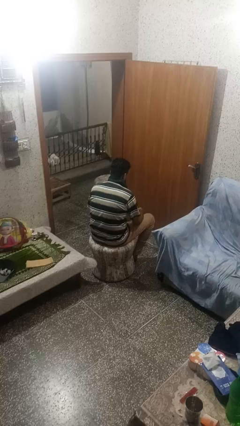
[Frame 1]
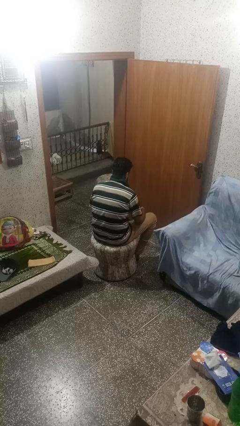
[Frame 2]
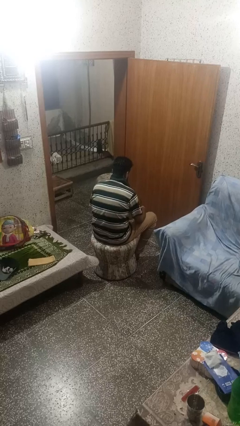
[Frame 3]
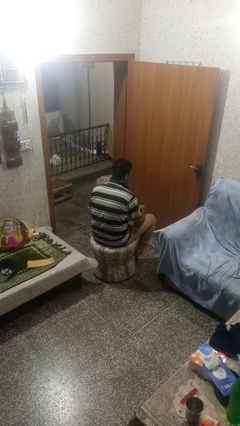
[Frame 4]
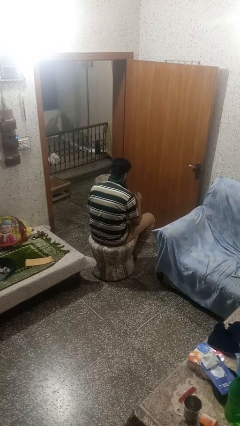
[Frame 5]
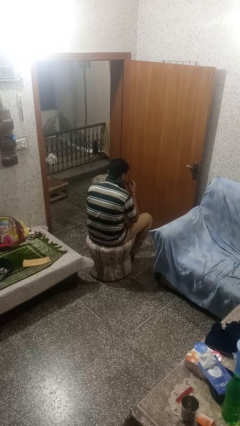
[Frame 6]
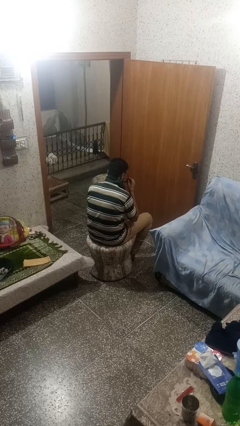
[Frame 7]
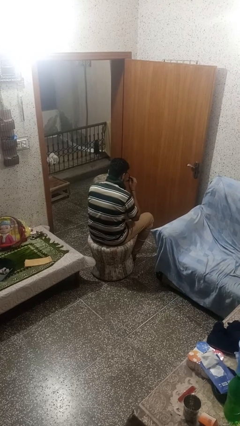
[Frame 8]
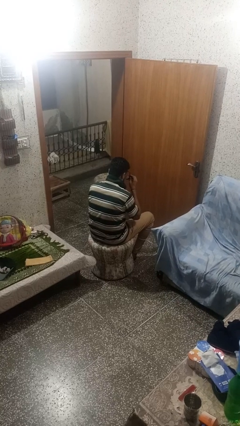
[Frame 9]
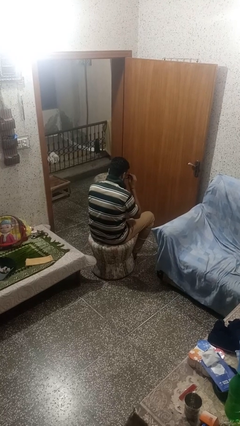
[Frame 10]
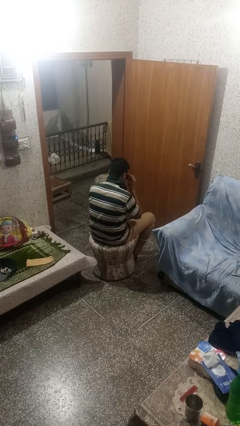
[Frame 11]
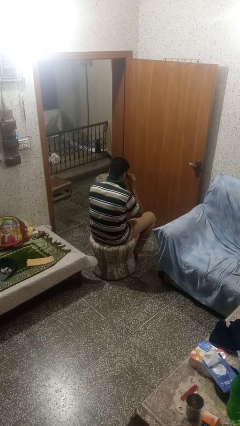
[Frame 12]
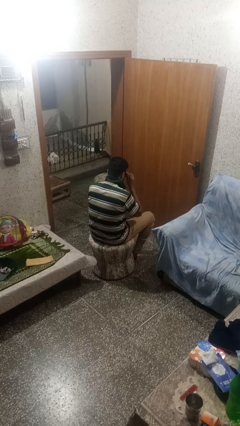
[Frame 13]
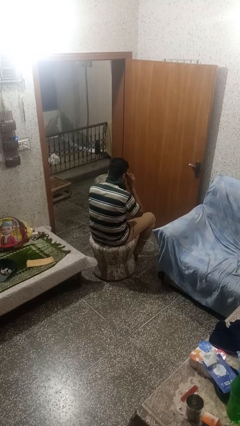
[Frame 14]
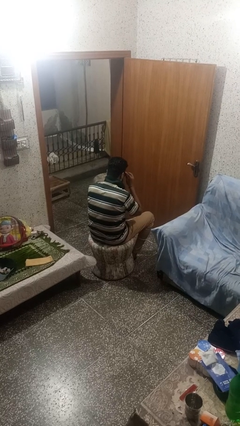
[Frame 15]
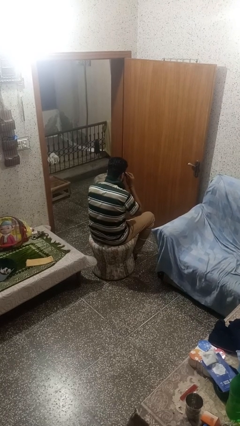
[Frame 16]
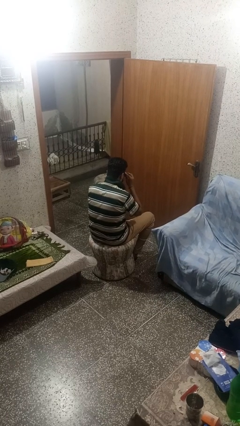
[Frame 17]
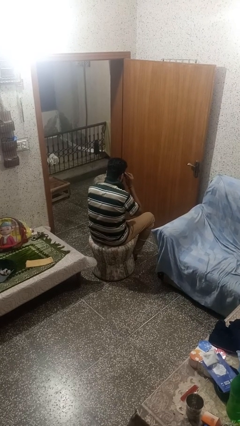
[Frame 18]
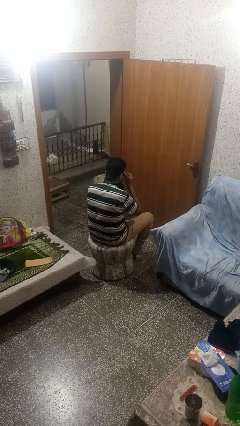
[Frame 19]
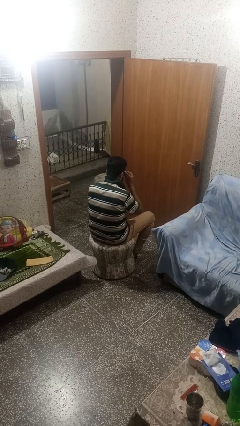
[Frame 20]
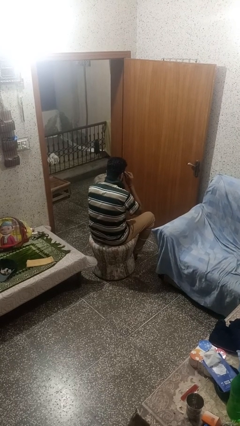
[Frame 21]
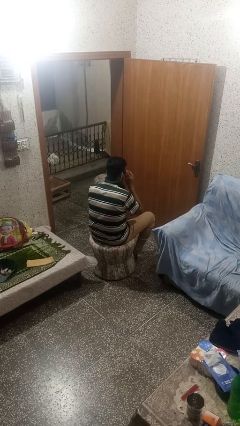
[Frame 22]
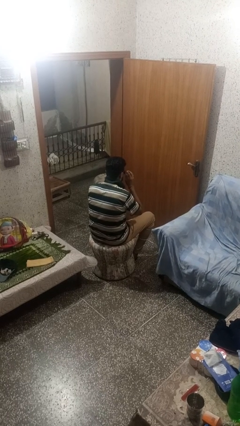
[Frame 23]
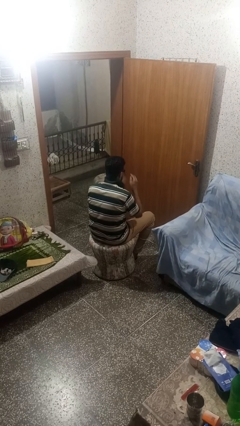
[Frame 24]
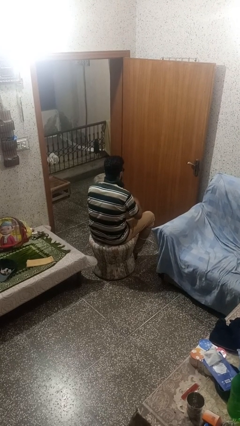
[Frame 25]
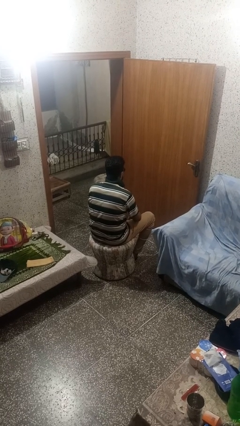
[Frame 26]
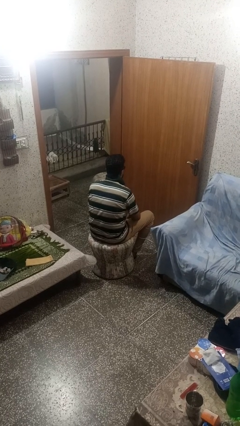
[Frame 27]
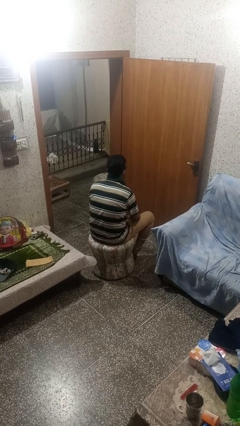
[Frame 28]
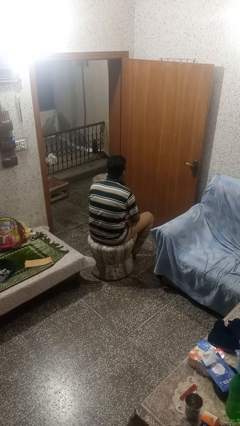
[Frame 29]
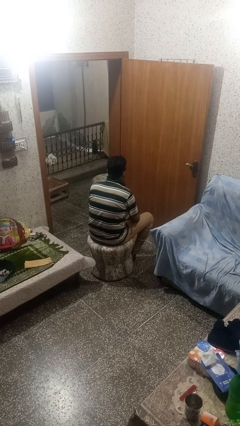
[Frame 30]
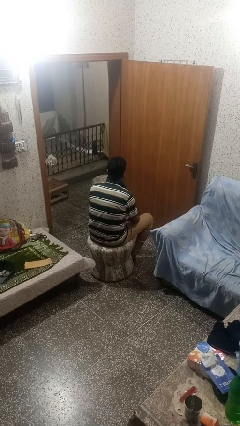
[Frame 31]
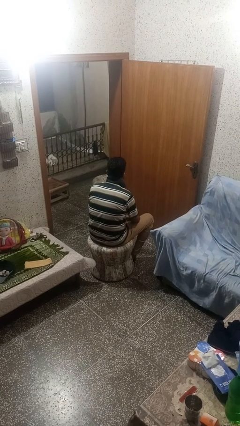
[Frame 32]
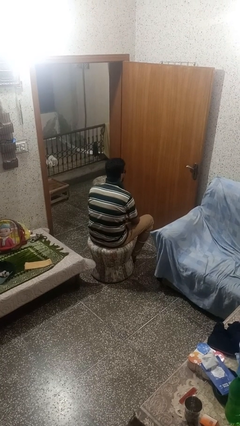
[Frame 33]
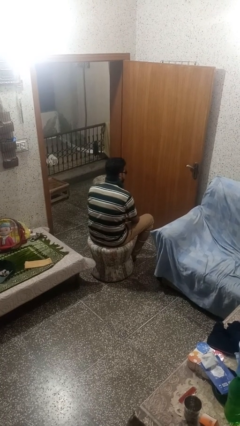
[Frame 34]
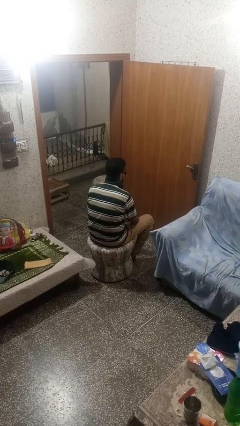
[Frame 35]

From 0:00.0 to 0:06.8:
person puts on glasses

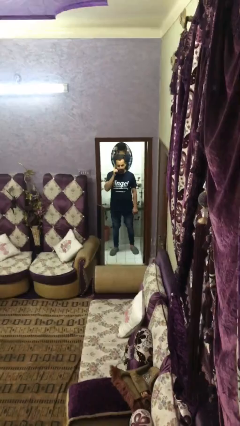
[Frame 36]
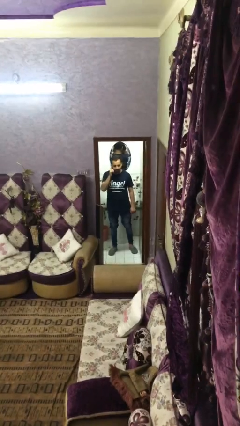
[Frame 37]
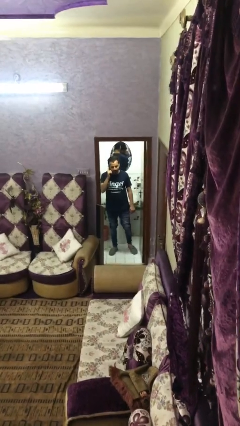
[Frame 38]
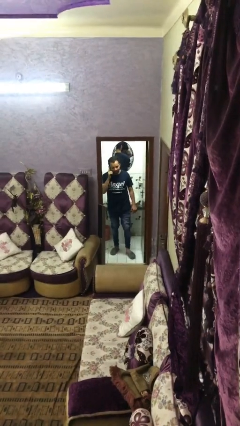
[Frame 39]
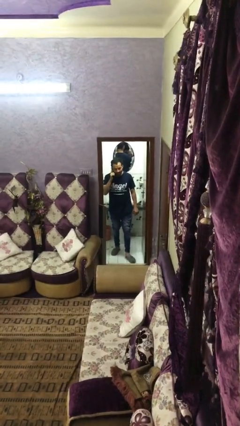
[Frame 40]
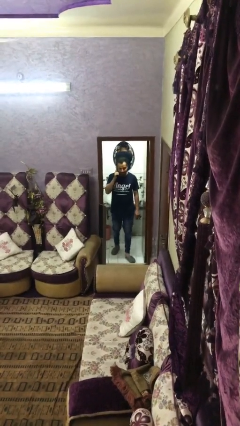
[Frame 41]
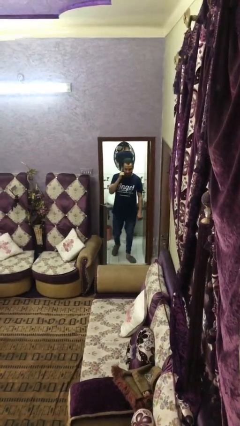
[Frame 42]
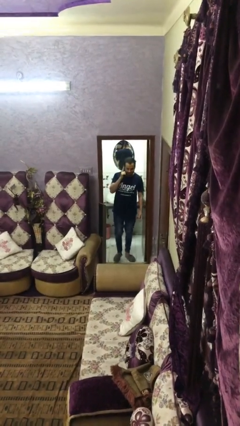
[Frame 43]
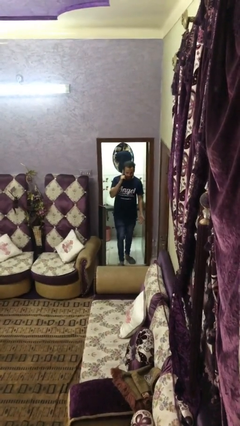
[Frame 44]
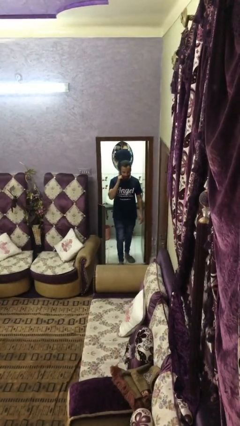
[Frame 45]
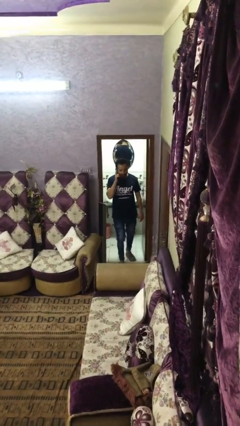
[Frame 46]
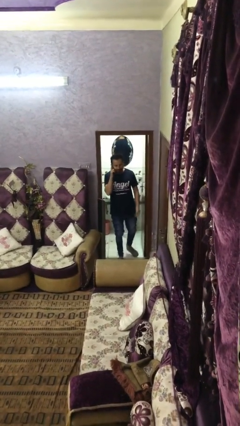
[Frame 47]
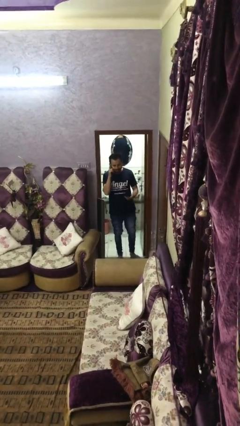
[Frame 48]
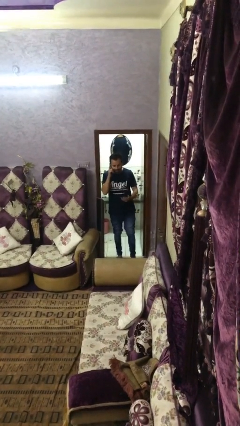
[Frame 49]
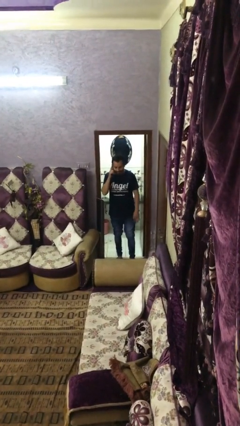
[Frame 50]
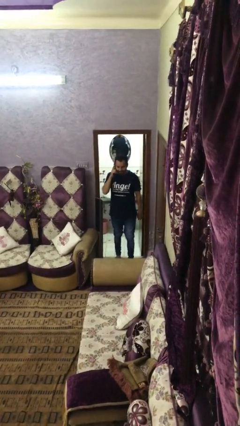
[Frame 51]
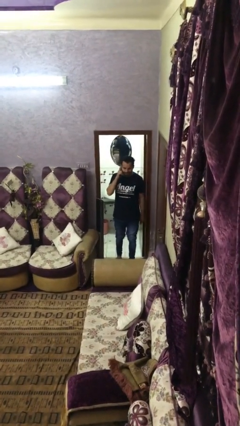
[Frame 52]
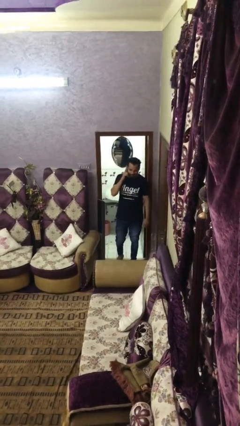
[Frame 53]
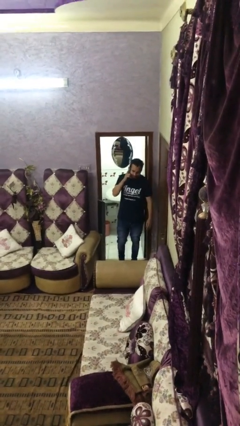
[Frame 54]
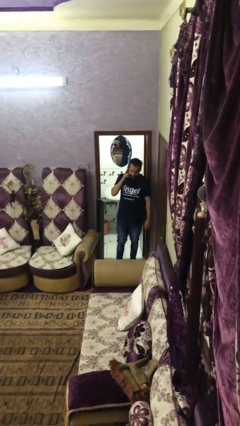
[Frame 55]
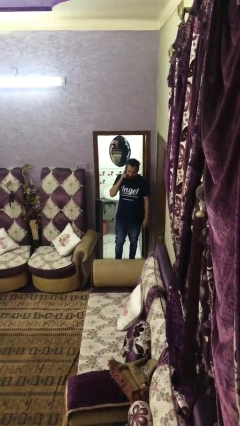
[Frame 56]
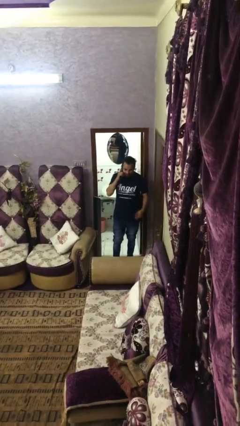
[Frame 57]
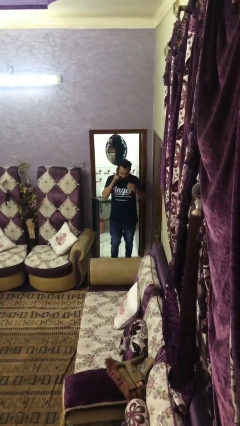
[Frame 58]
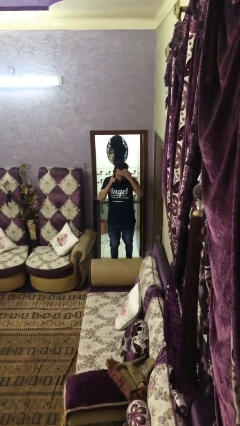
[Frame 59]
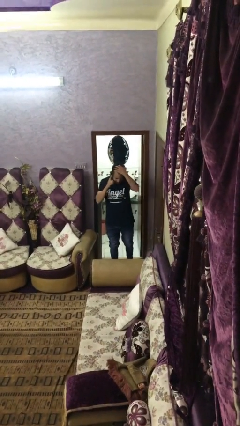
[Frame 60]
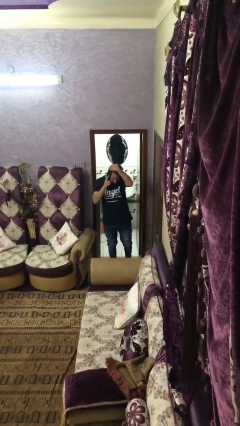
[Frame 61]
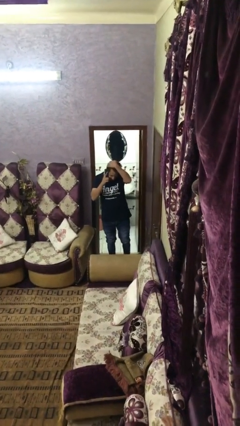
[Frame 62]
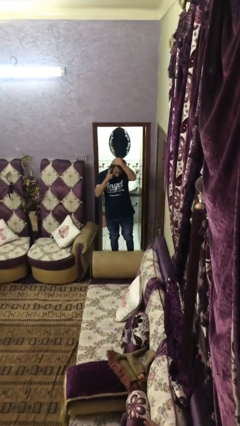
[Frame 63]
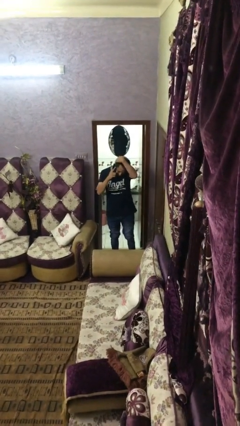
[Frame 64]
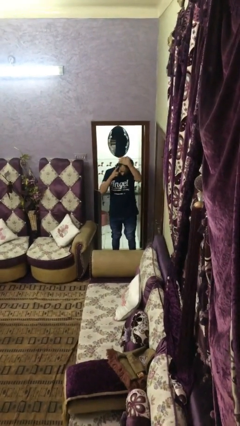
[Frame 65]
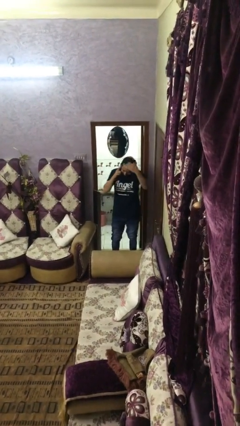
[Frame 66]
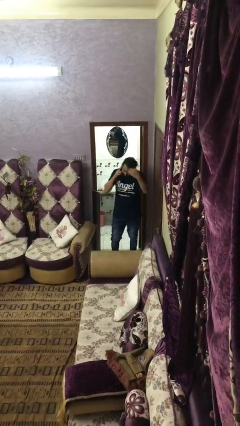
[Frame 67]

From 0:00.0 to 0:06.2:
person enters scene through structure

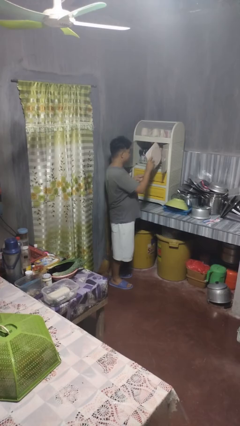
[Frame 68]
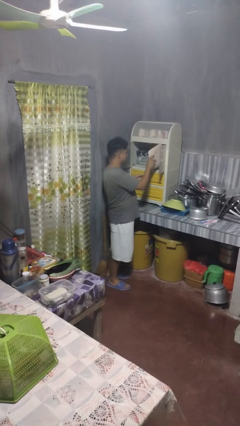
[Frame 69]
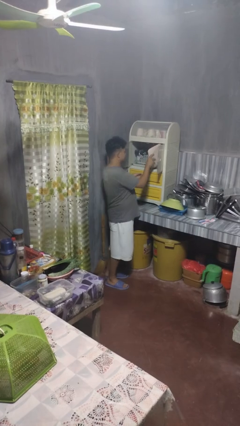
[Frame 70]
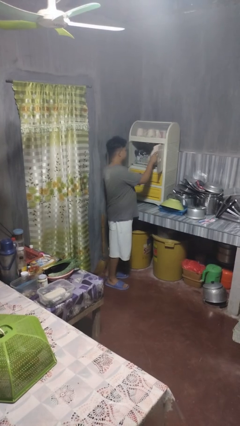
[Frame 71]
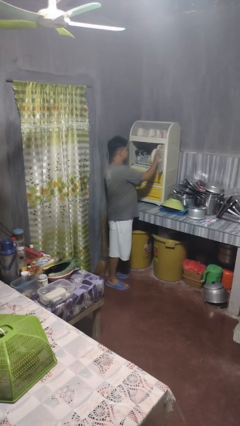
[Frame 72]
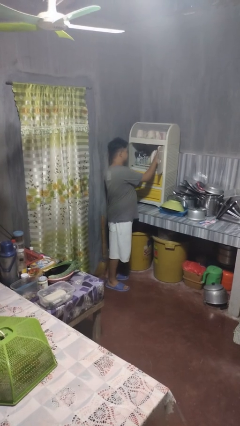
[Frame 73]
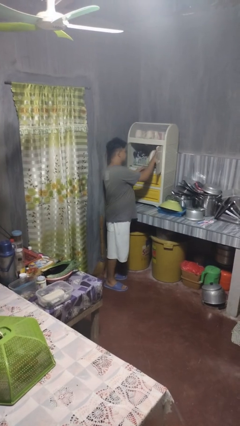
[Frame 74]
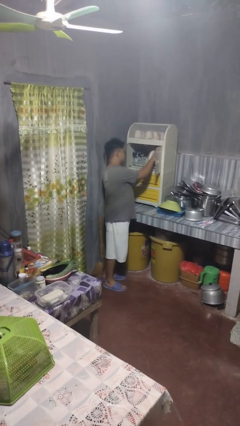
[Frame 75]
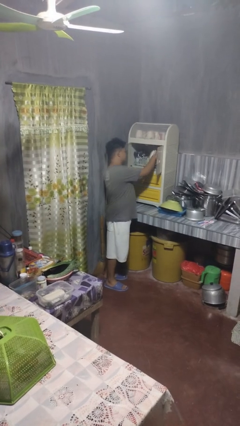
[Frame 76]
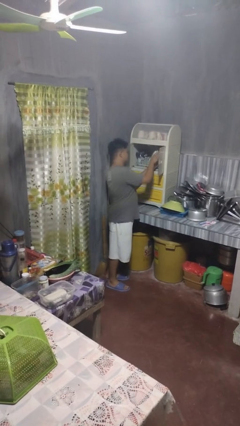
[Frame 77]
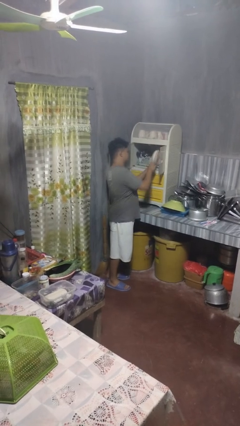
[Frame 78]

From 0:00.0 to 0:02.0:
person puts object in cabinet

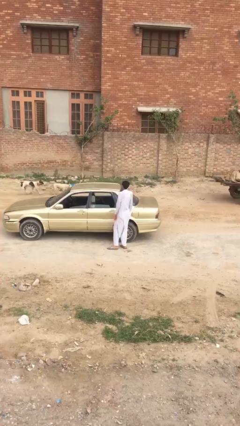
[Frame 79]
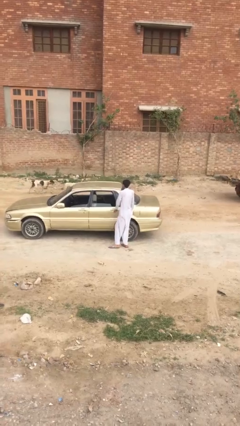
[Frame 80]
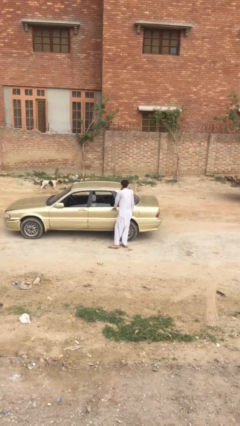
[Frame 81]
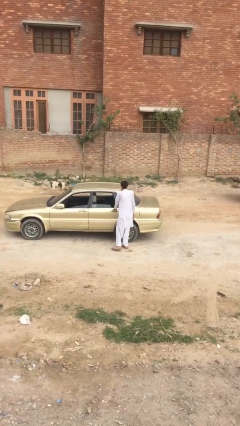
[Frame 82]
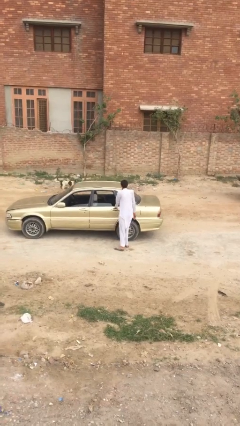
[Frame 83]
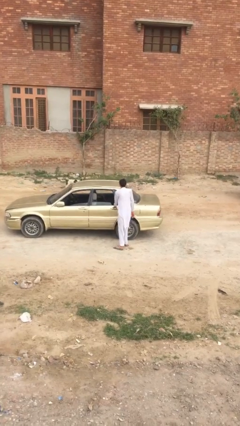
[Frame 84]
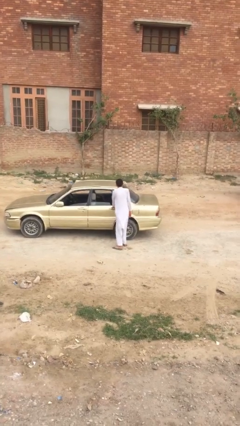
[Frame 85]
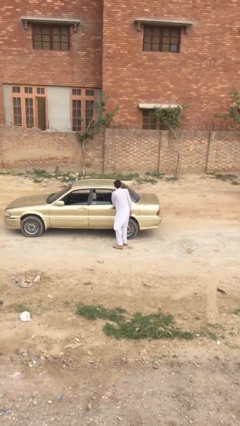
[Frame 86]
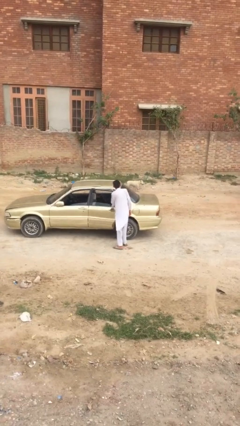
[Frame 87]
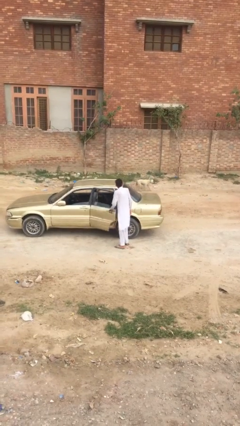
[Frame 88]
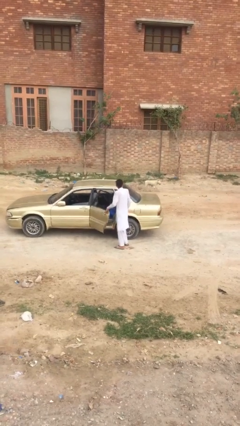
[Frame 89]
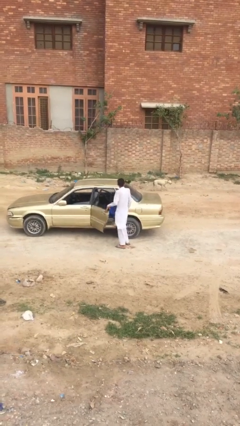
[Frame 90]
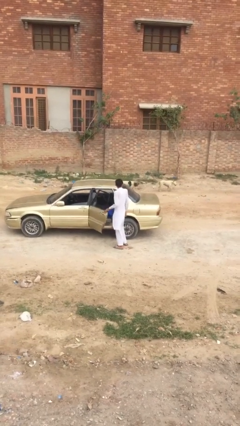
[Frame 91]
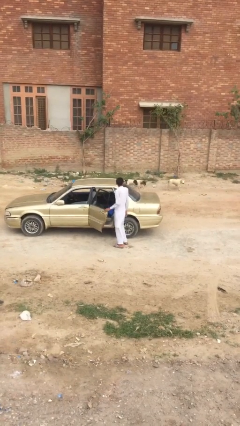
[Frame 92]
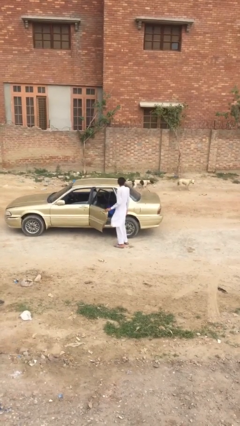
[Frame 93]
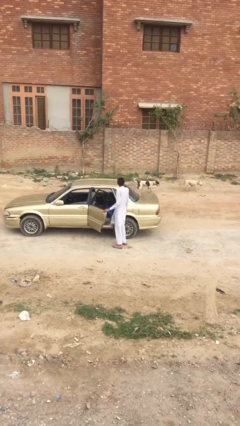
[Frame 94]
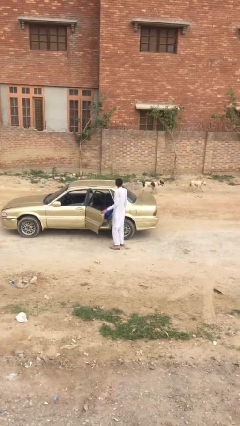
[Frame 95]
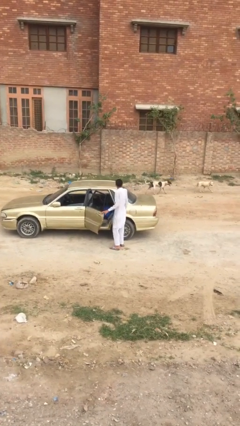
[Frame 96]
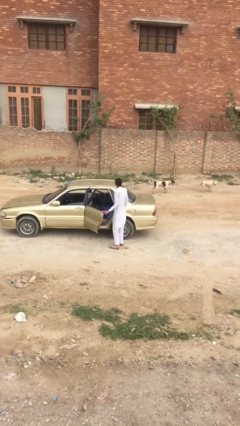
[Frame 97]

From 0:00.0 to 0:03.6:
person opens car door
